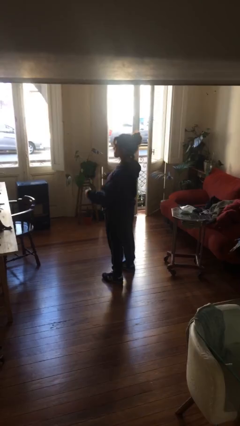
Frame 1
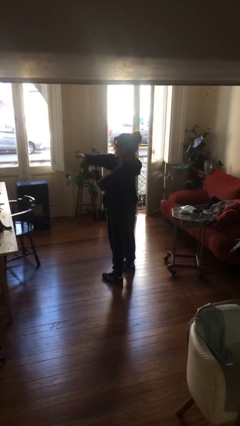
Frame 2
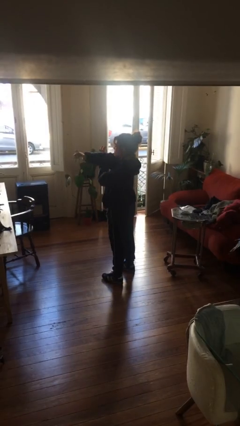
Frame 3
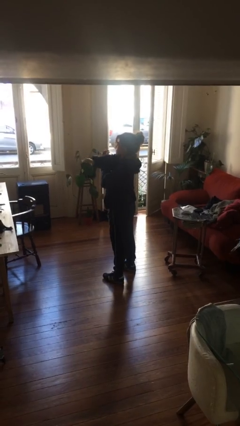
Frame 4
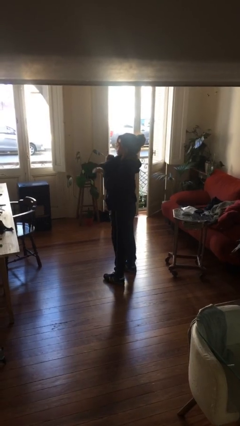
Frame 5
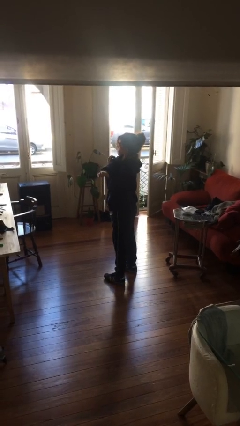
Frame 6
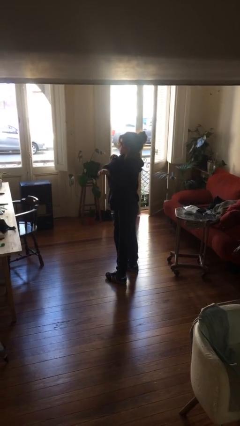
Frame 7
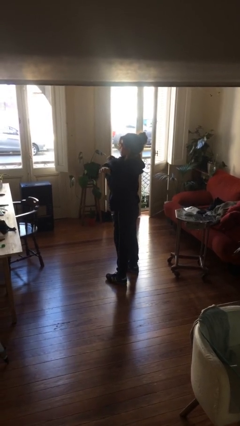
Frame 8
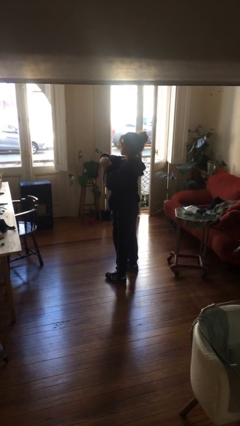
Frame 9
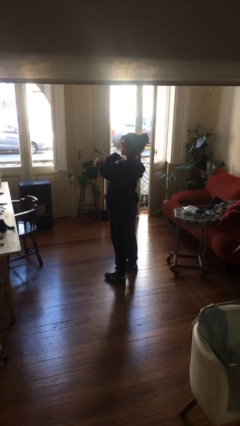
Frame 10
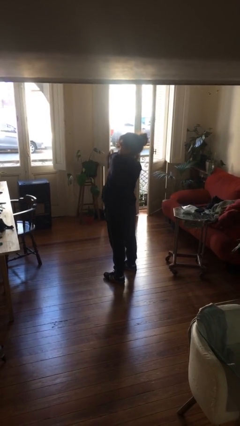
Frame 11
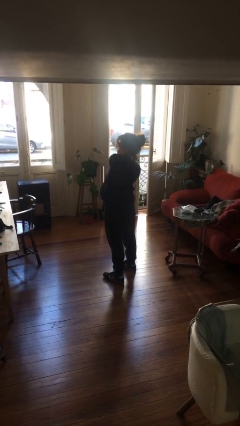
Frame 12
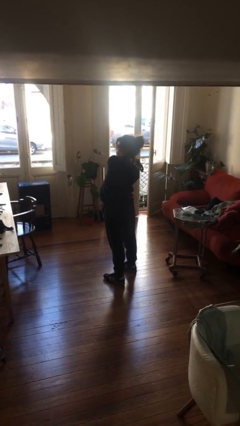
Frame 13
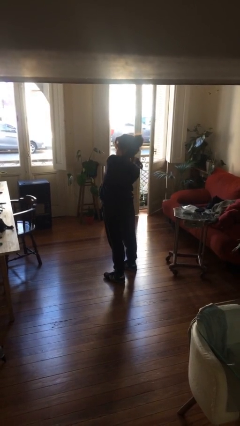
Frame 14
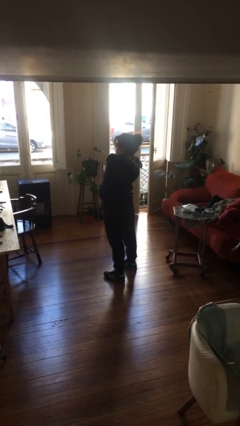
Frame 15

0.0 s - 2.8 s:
person stretches arms to side

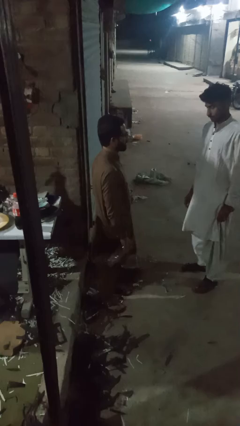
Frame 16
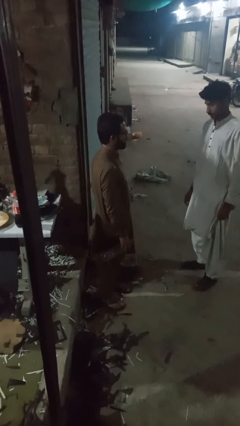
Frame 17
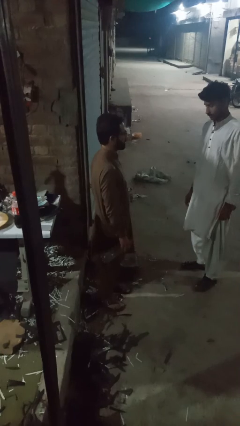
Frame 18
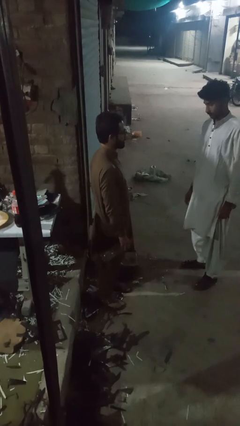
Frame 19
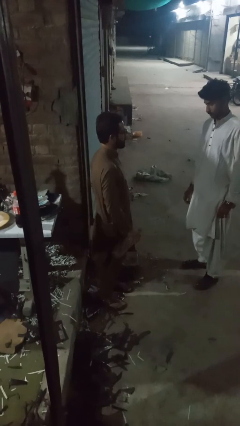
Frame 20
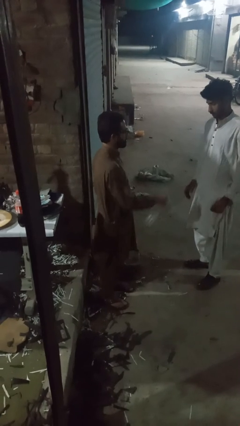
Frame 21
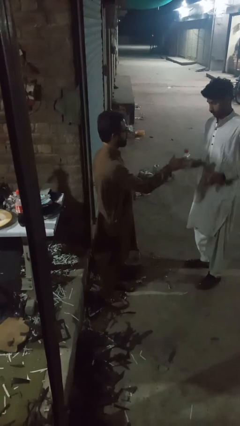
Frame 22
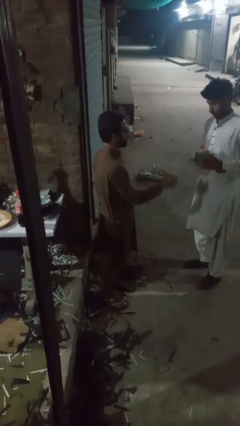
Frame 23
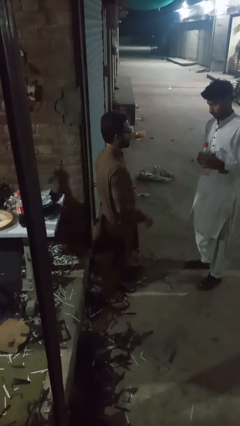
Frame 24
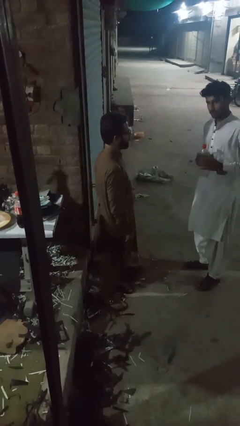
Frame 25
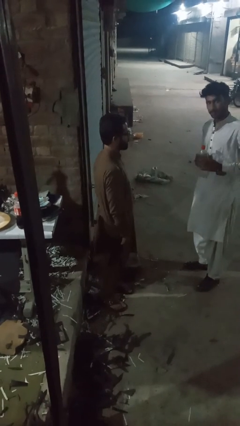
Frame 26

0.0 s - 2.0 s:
person throws object to person

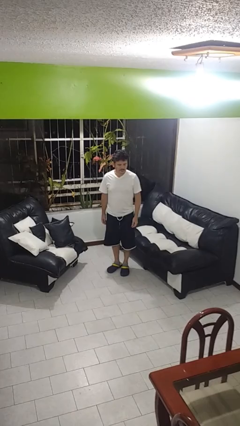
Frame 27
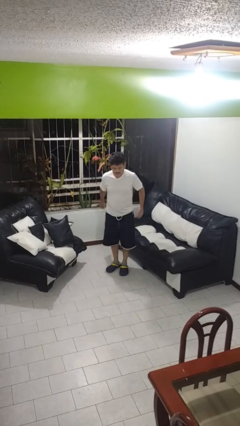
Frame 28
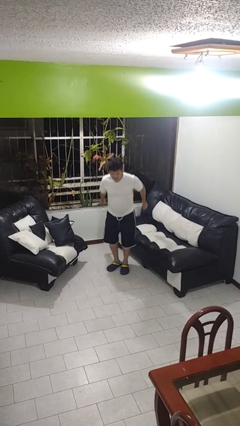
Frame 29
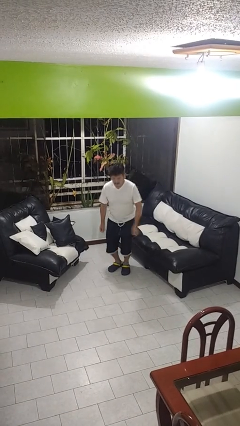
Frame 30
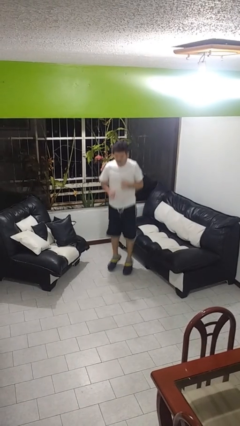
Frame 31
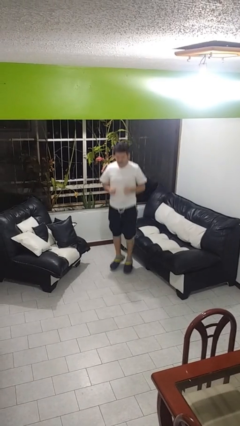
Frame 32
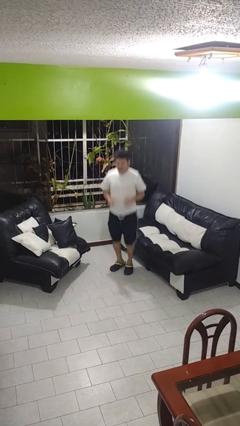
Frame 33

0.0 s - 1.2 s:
person jumps

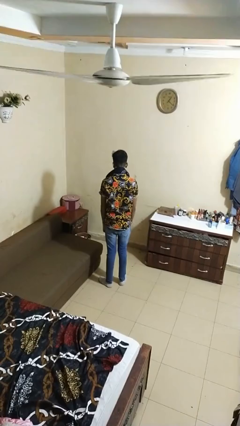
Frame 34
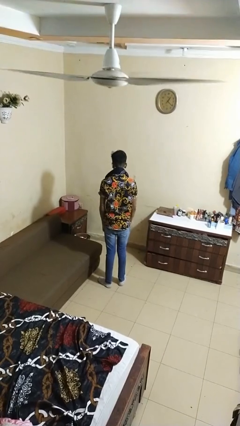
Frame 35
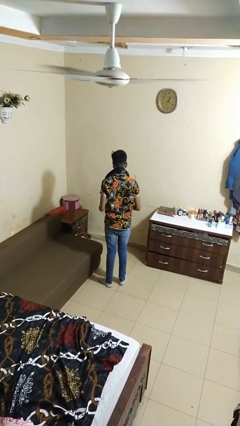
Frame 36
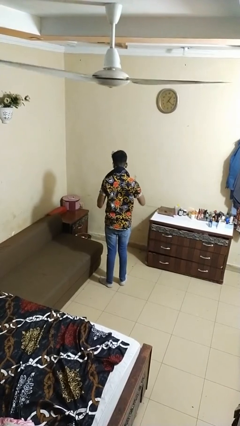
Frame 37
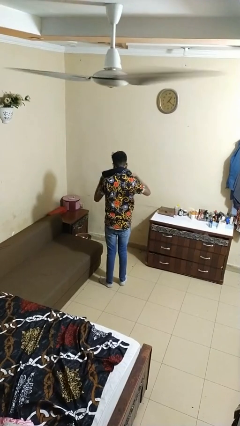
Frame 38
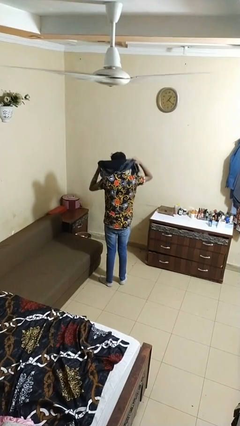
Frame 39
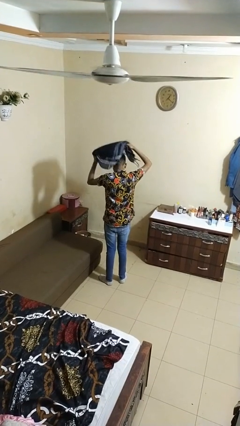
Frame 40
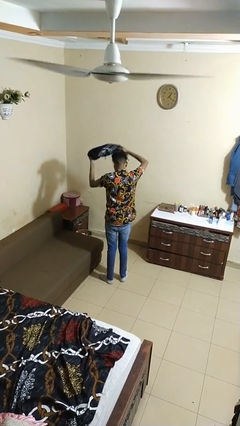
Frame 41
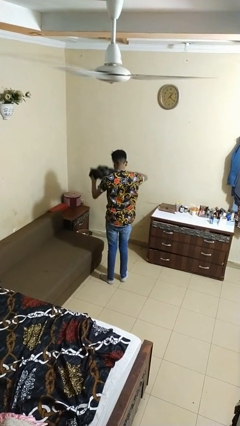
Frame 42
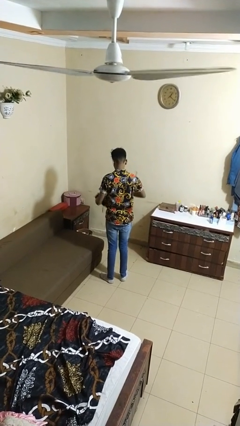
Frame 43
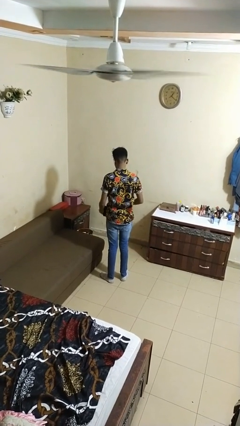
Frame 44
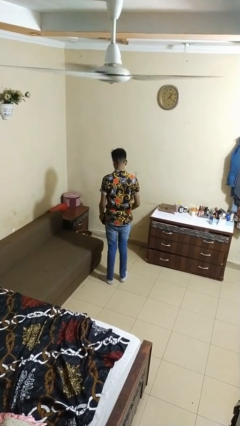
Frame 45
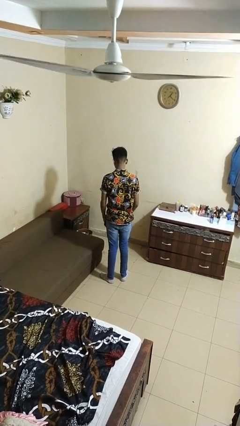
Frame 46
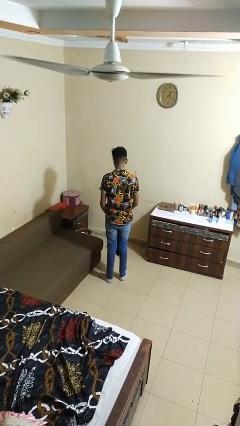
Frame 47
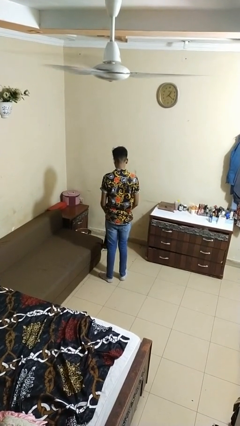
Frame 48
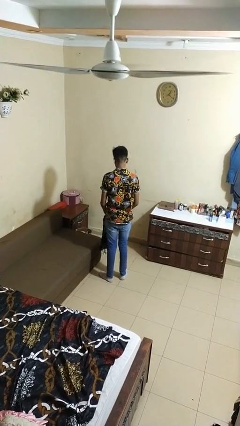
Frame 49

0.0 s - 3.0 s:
person takes off scarf

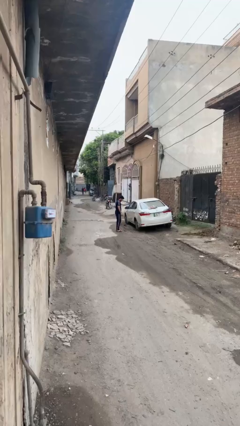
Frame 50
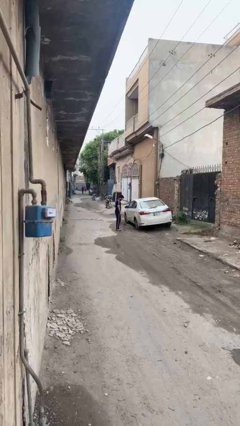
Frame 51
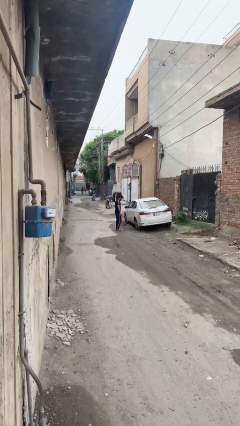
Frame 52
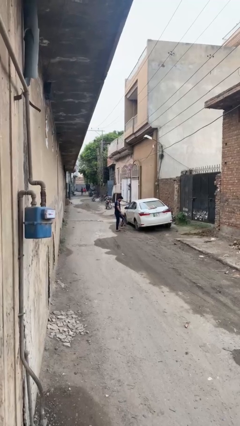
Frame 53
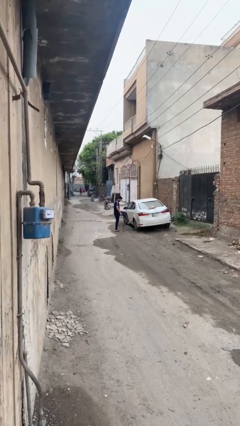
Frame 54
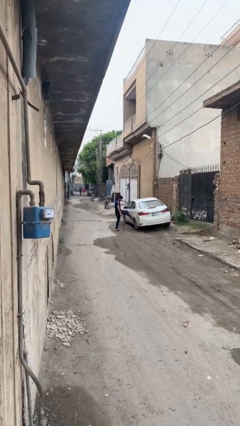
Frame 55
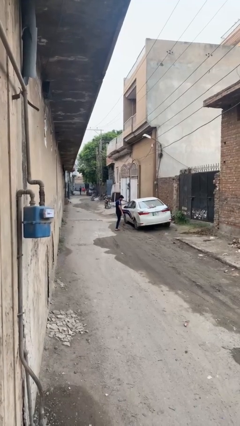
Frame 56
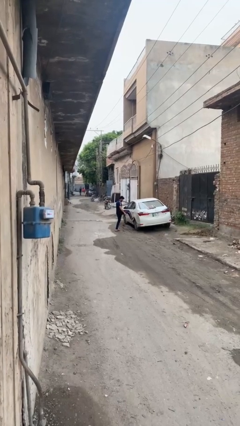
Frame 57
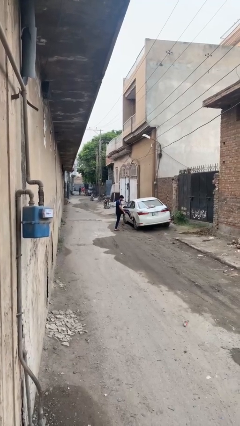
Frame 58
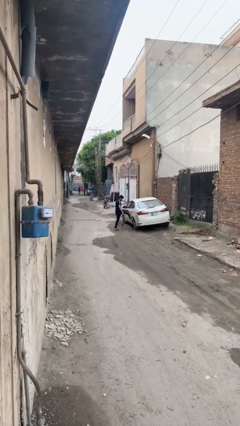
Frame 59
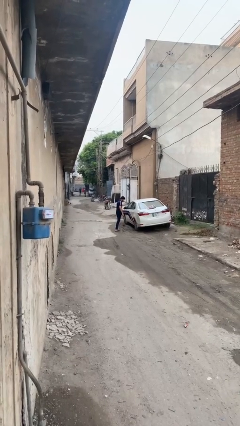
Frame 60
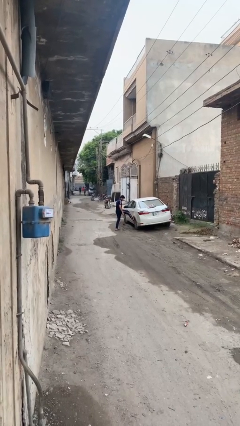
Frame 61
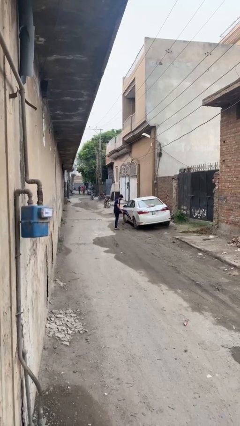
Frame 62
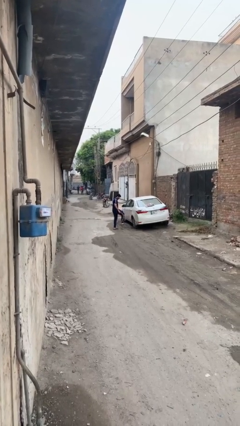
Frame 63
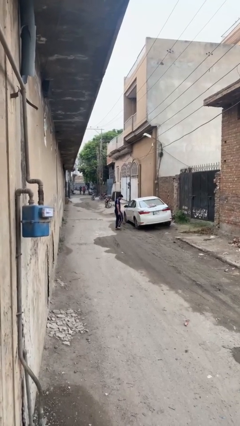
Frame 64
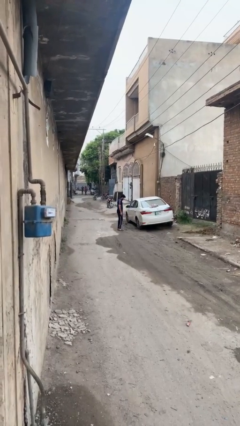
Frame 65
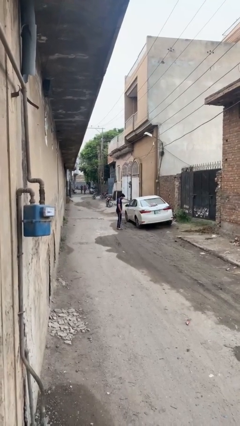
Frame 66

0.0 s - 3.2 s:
person kicks car tires

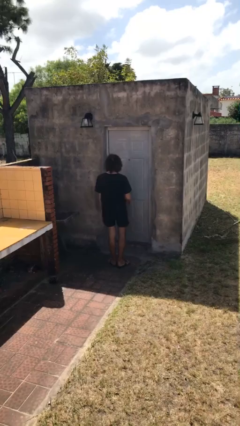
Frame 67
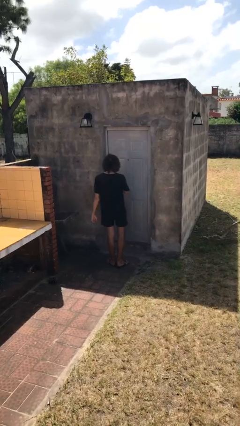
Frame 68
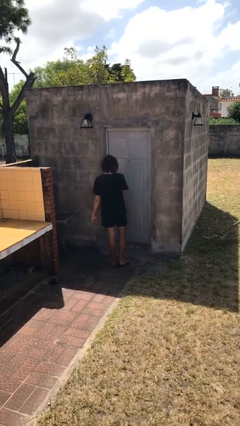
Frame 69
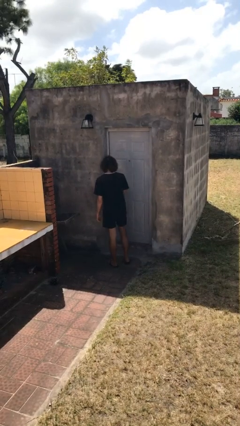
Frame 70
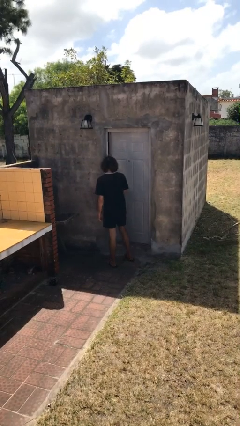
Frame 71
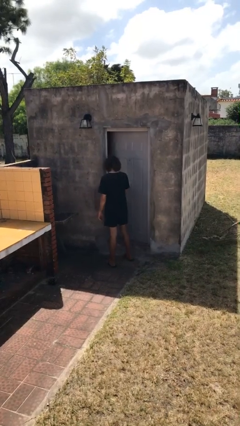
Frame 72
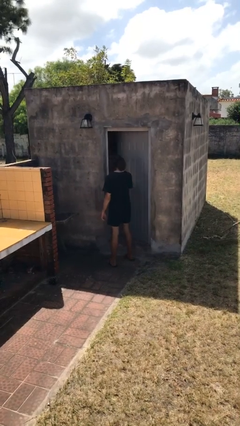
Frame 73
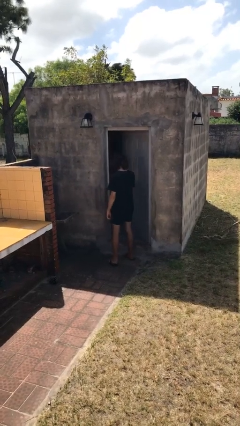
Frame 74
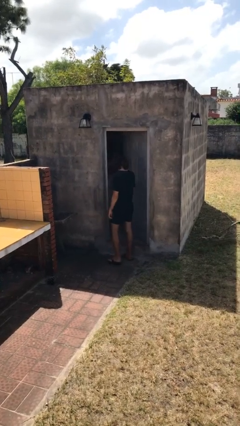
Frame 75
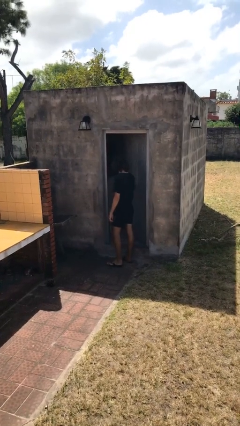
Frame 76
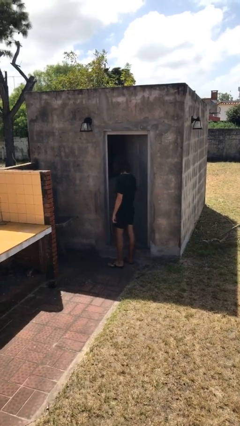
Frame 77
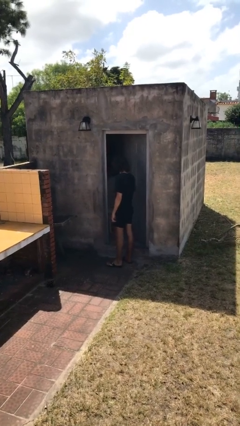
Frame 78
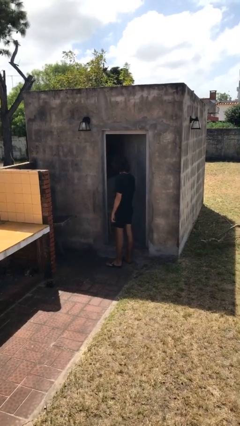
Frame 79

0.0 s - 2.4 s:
person opens facility door

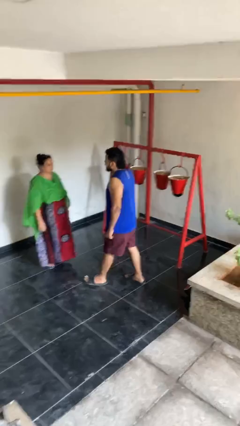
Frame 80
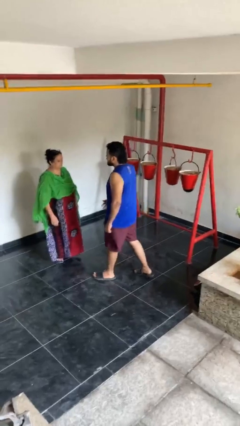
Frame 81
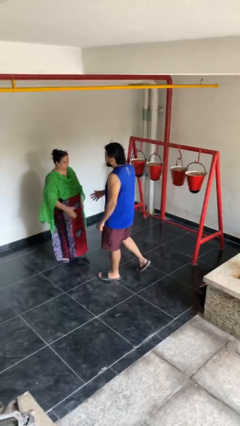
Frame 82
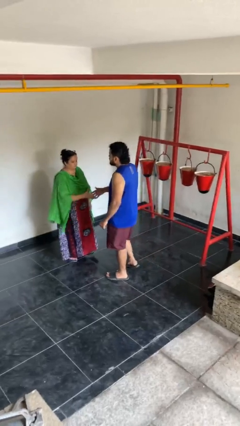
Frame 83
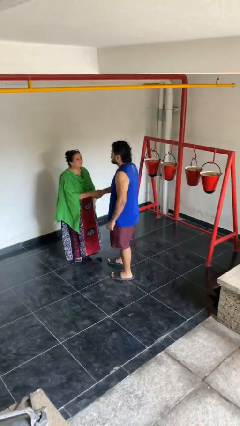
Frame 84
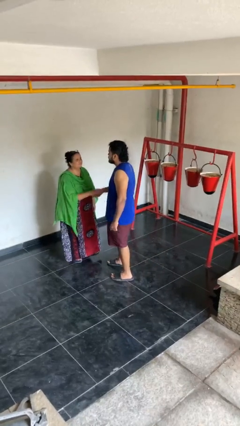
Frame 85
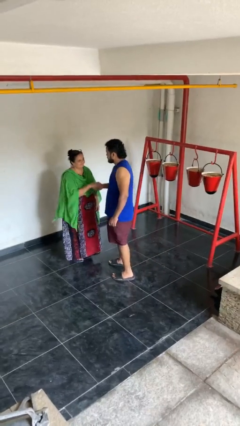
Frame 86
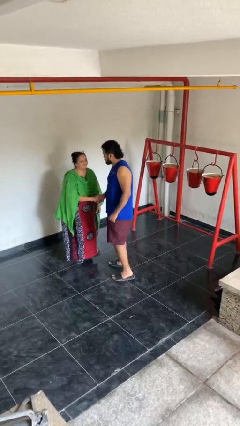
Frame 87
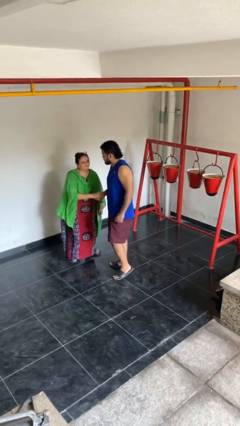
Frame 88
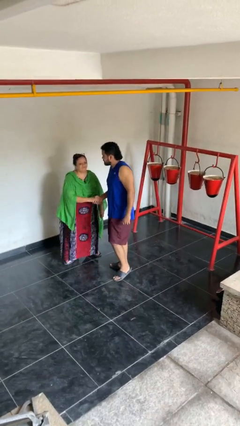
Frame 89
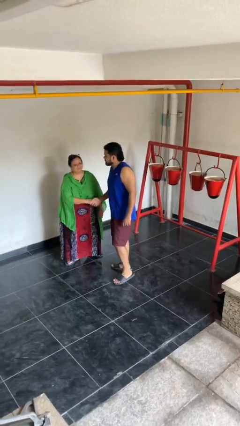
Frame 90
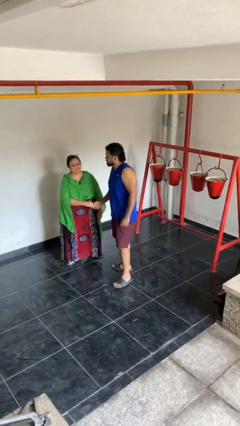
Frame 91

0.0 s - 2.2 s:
person shakes hand
